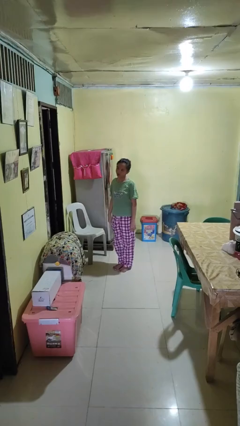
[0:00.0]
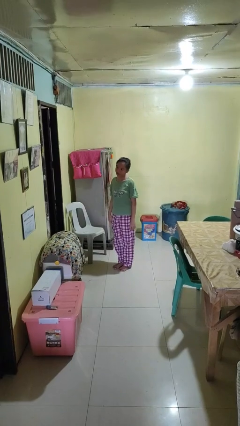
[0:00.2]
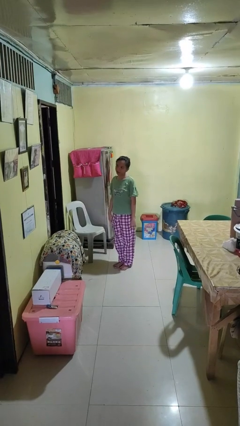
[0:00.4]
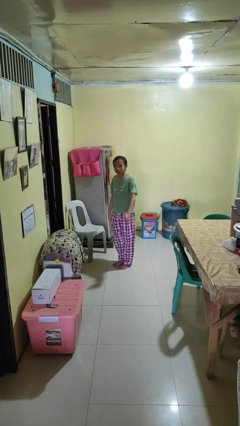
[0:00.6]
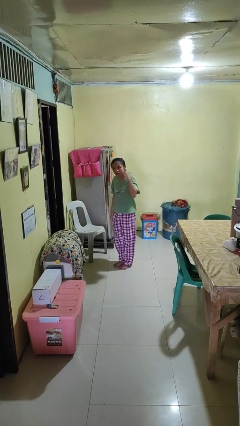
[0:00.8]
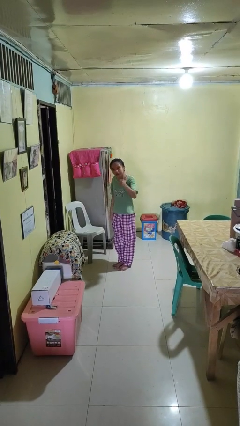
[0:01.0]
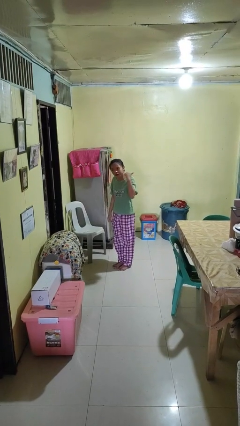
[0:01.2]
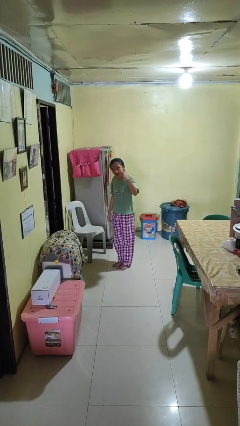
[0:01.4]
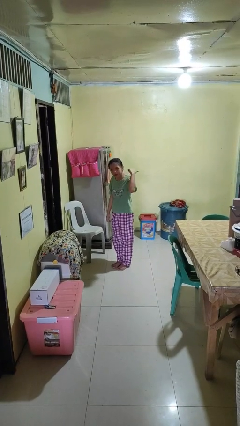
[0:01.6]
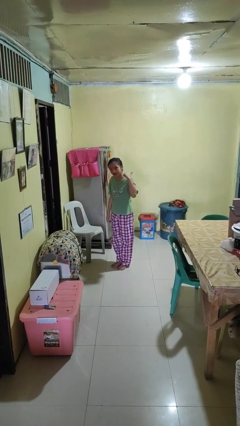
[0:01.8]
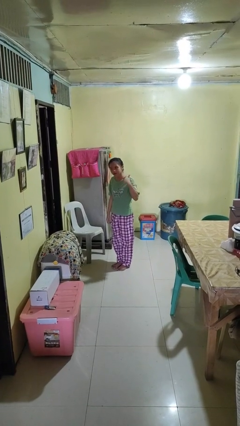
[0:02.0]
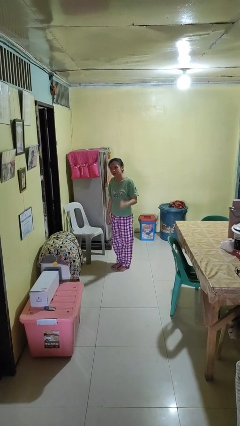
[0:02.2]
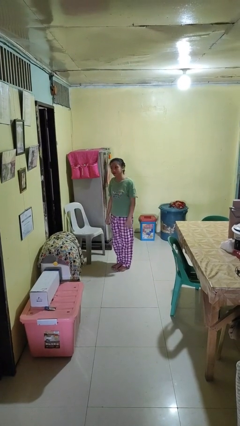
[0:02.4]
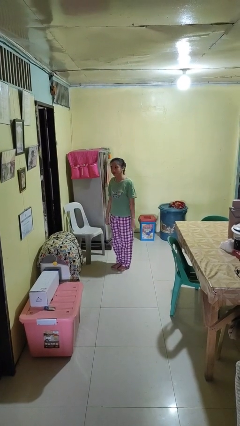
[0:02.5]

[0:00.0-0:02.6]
person gestures behind me

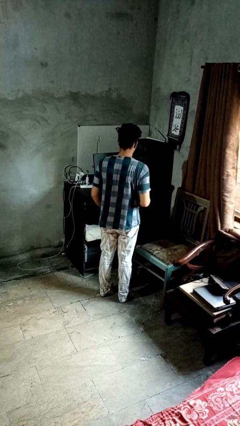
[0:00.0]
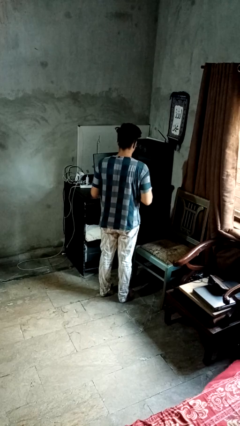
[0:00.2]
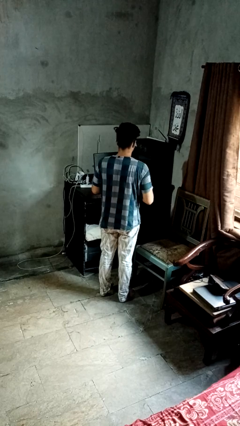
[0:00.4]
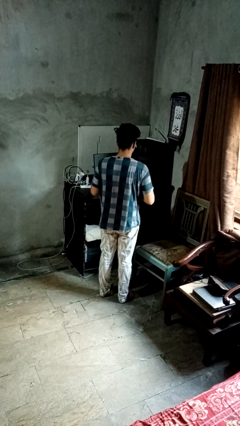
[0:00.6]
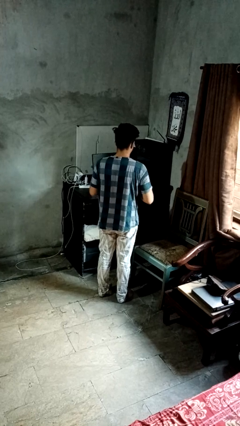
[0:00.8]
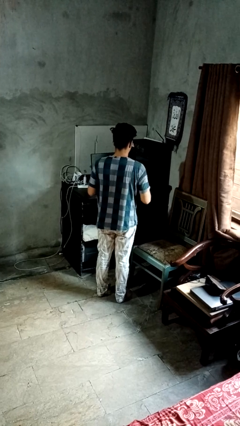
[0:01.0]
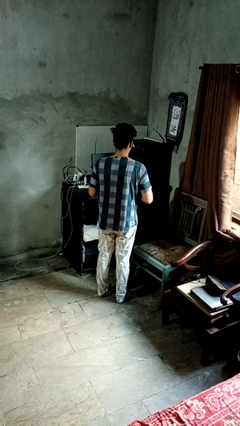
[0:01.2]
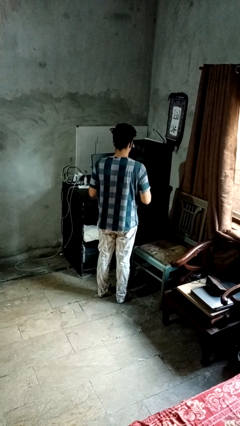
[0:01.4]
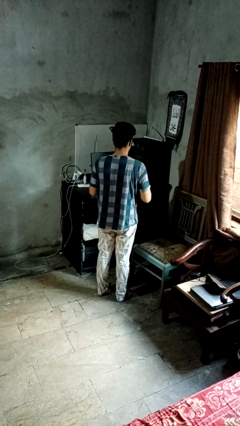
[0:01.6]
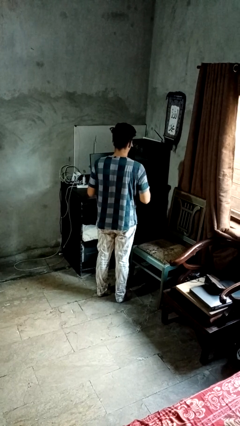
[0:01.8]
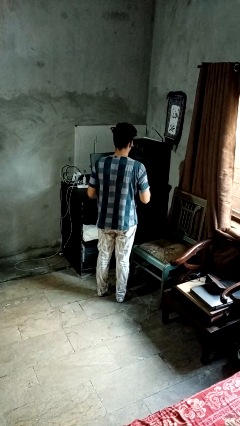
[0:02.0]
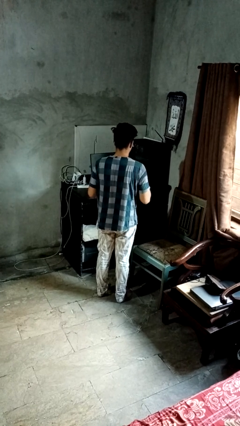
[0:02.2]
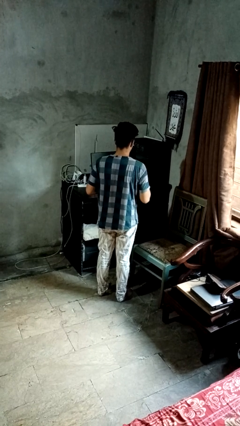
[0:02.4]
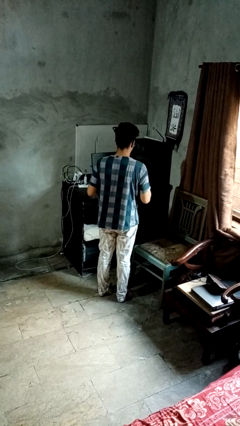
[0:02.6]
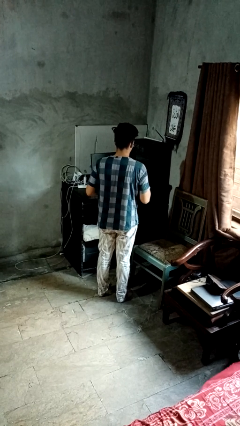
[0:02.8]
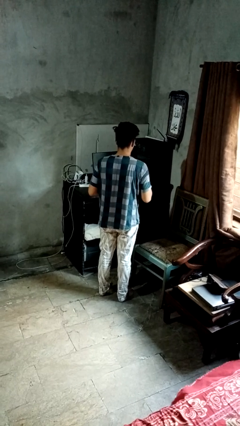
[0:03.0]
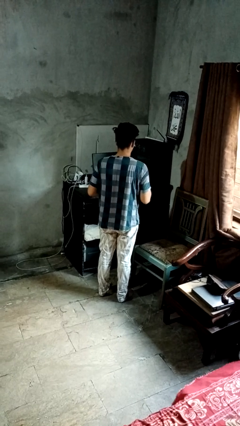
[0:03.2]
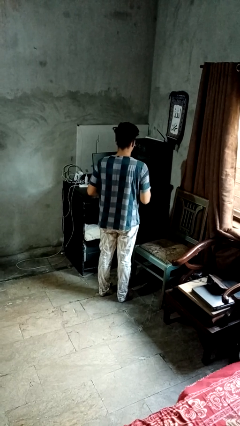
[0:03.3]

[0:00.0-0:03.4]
person drums on chest

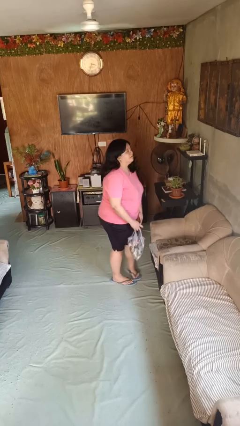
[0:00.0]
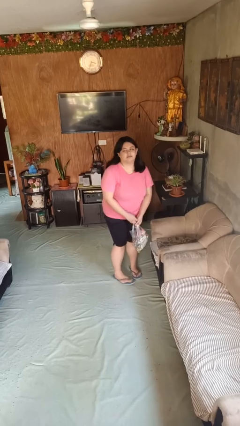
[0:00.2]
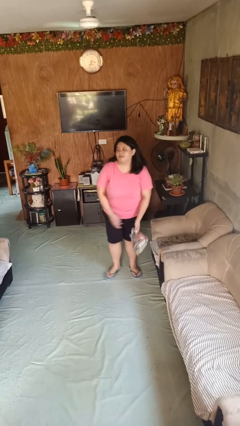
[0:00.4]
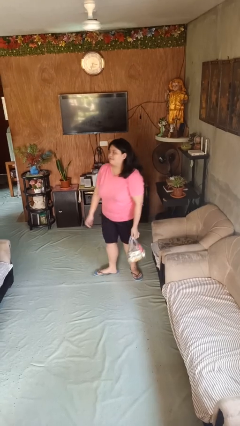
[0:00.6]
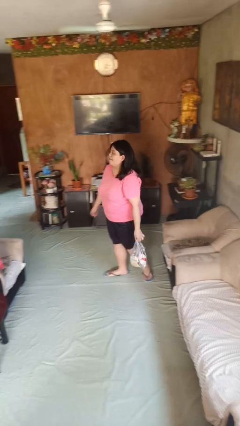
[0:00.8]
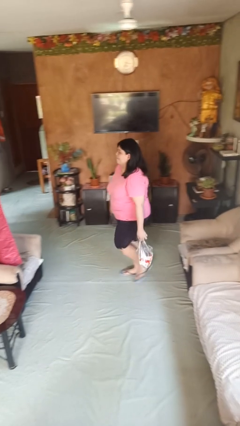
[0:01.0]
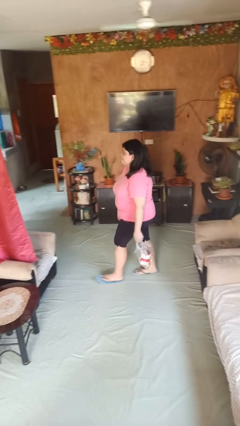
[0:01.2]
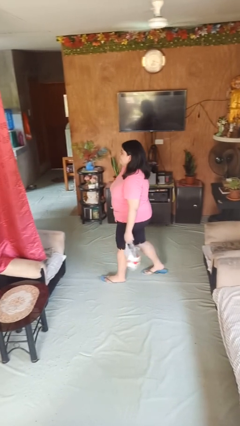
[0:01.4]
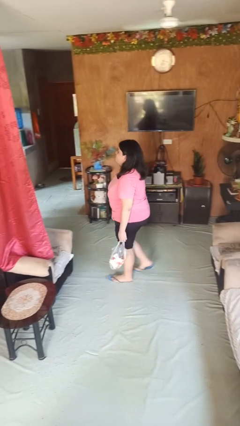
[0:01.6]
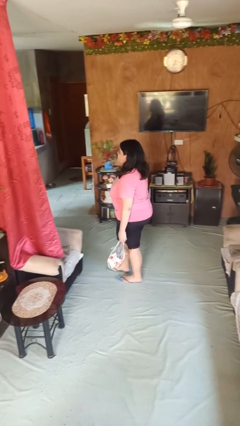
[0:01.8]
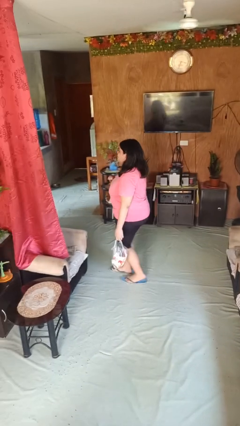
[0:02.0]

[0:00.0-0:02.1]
person carries groceries

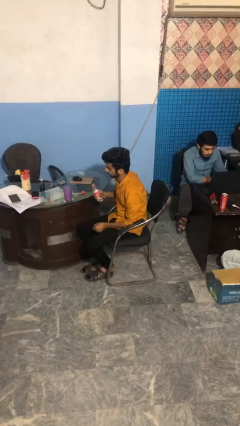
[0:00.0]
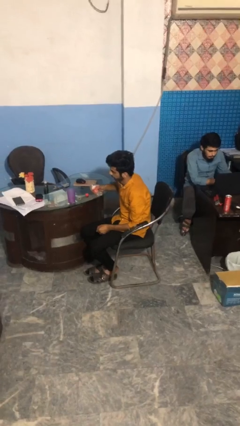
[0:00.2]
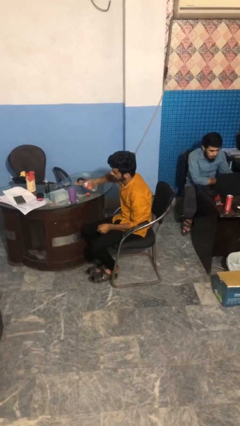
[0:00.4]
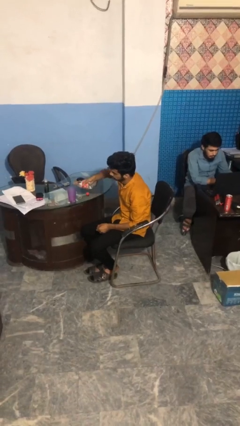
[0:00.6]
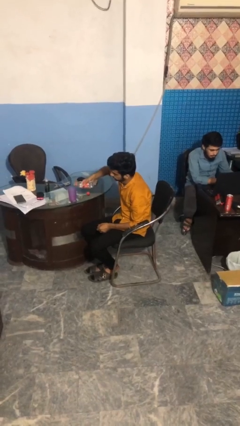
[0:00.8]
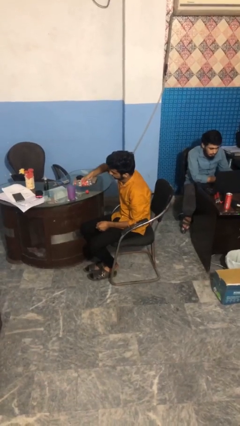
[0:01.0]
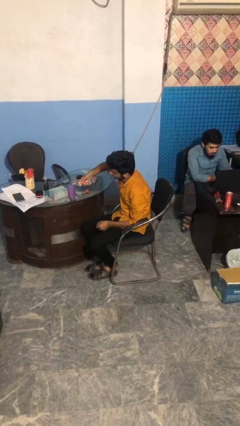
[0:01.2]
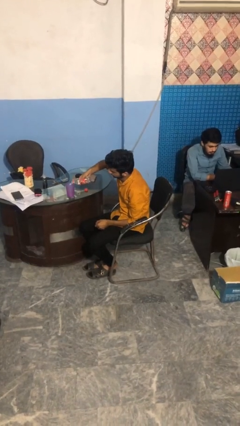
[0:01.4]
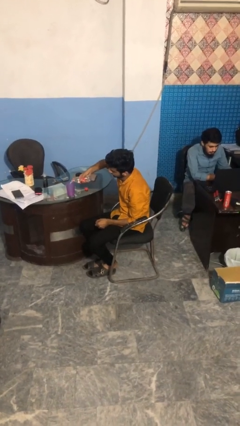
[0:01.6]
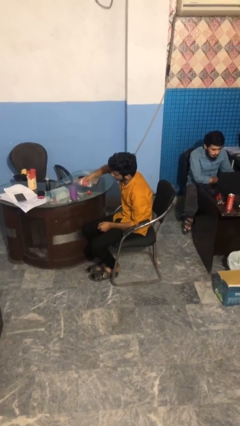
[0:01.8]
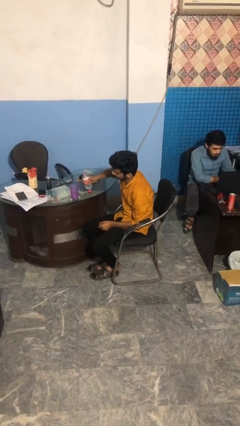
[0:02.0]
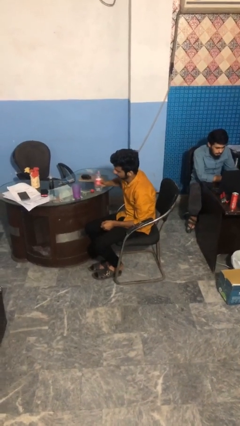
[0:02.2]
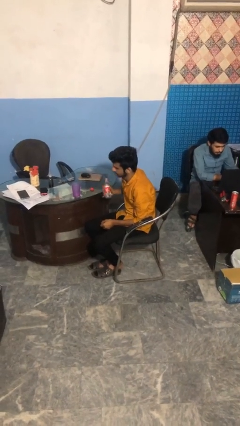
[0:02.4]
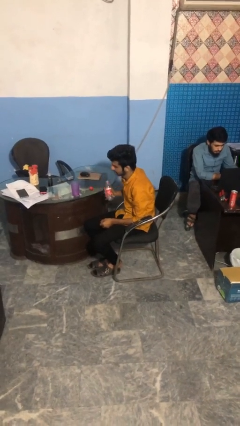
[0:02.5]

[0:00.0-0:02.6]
person pours liquid into cup

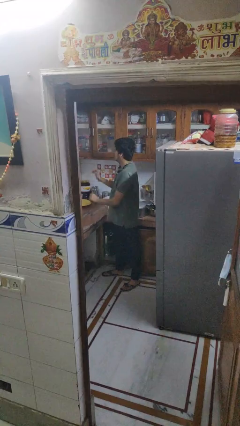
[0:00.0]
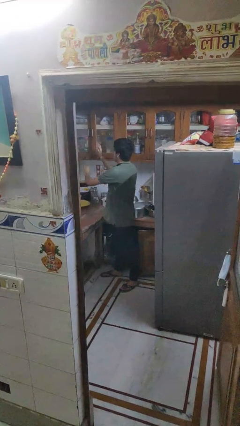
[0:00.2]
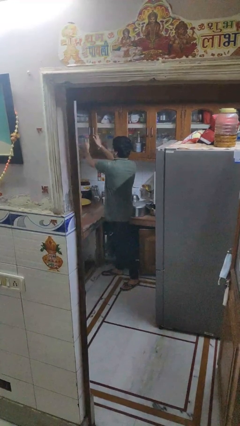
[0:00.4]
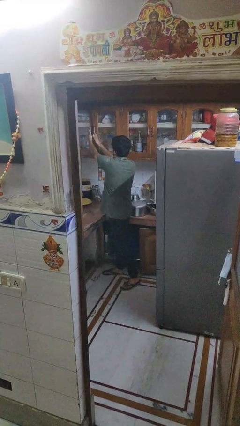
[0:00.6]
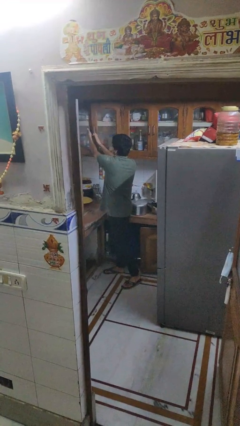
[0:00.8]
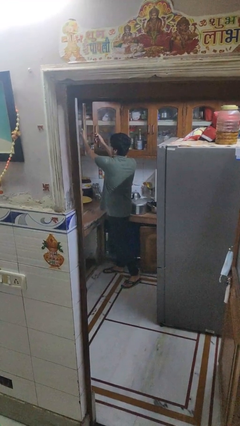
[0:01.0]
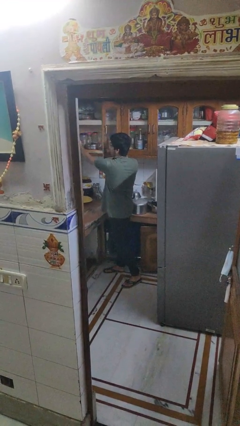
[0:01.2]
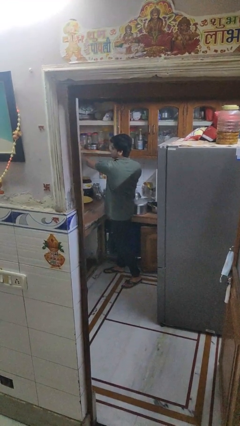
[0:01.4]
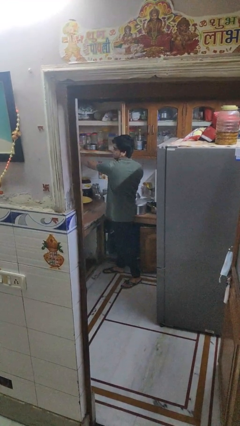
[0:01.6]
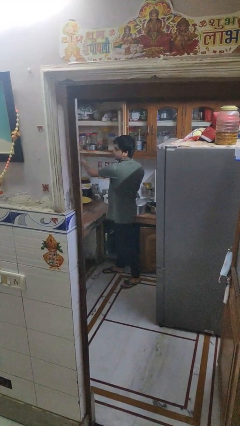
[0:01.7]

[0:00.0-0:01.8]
person opens cabinet

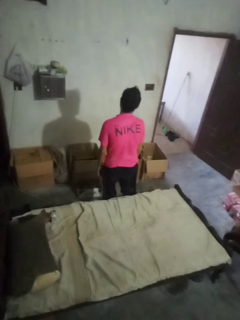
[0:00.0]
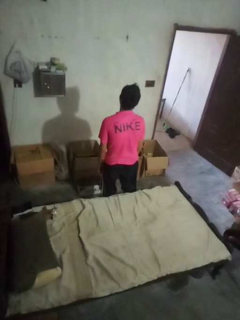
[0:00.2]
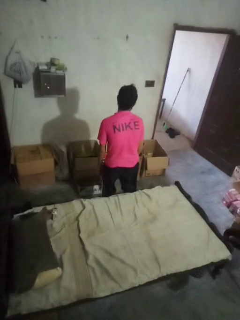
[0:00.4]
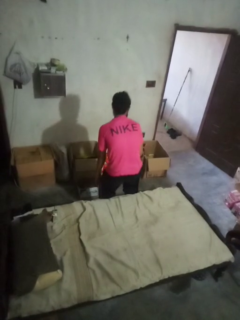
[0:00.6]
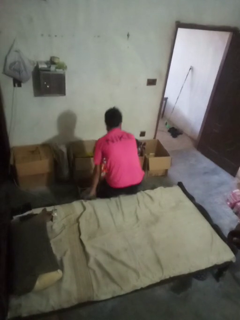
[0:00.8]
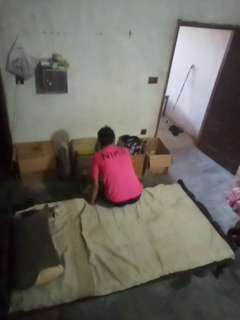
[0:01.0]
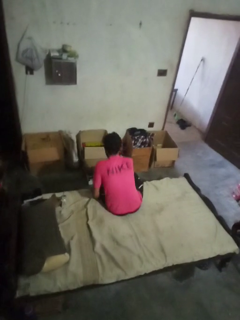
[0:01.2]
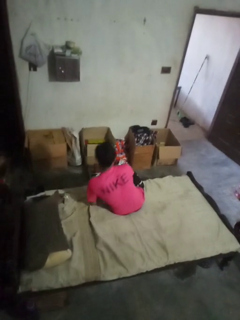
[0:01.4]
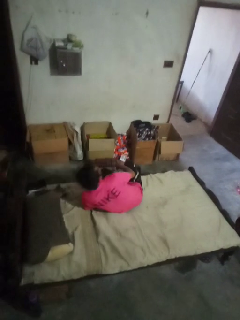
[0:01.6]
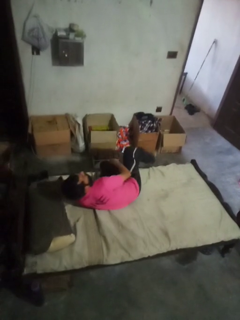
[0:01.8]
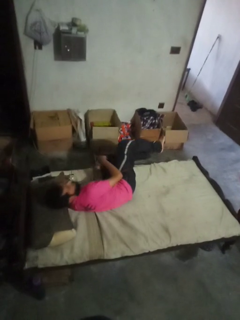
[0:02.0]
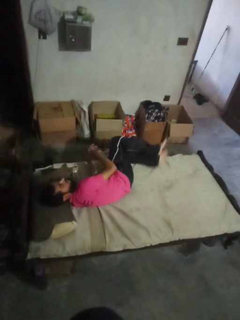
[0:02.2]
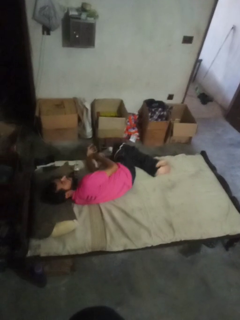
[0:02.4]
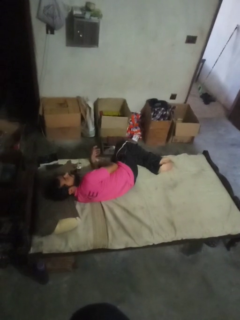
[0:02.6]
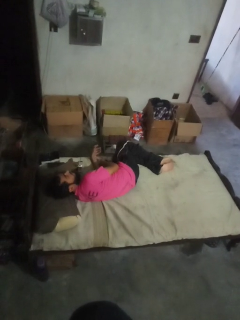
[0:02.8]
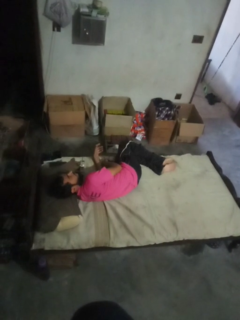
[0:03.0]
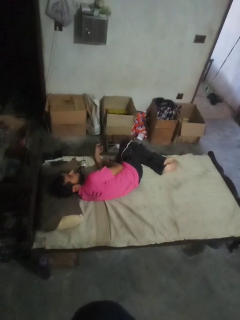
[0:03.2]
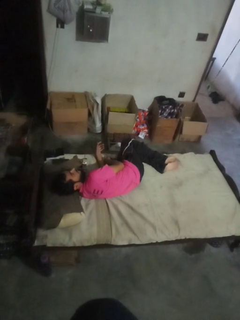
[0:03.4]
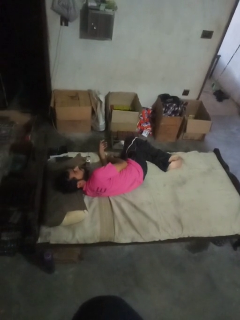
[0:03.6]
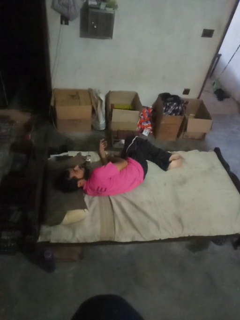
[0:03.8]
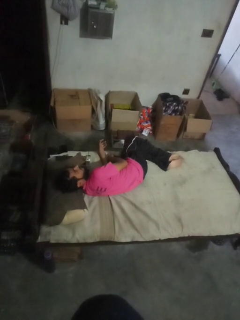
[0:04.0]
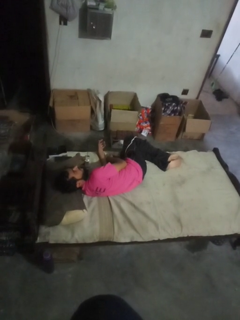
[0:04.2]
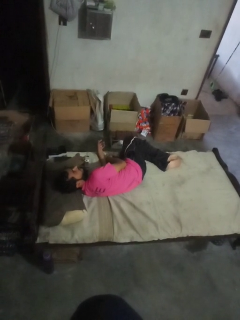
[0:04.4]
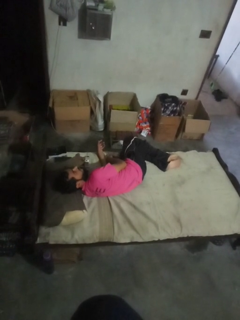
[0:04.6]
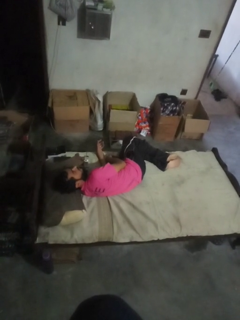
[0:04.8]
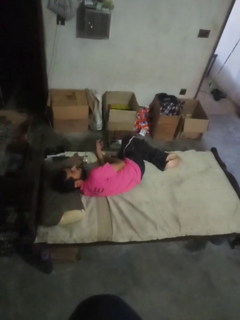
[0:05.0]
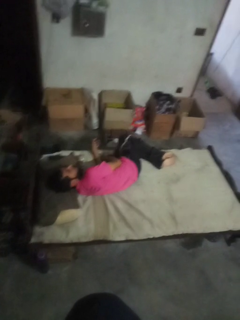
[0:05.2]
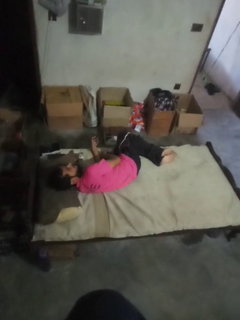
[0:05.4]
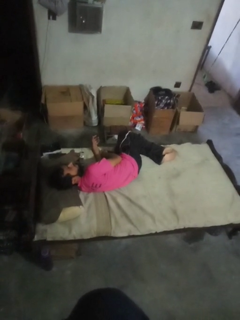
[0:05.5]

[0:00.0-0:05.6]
person lies down on bed

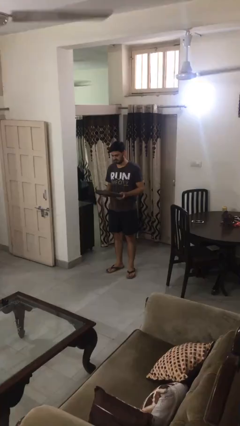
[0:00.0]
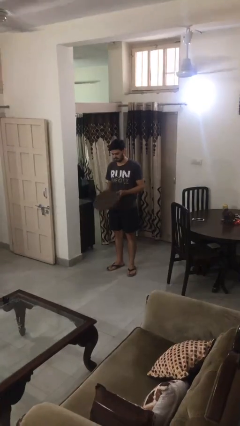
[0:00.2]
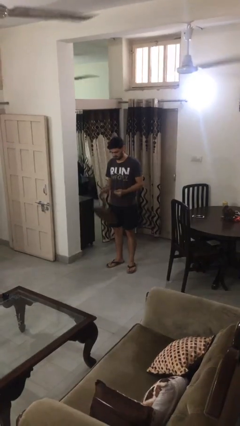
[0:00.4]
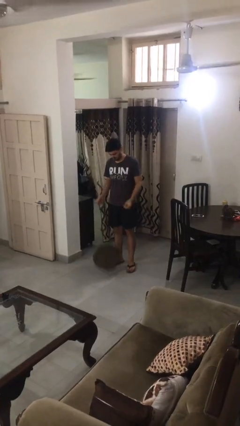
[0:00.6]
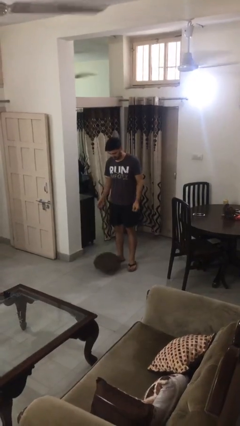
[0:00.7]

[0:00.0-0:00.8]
person drops object
